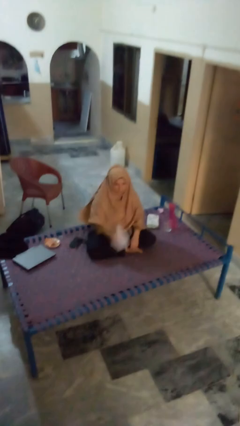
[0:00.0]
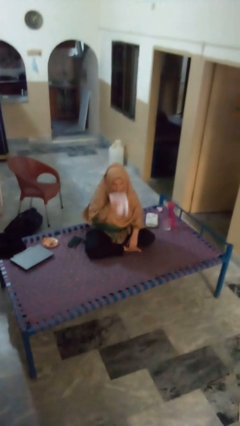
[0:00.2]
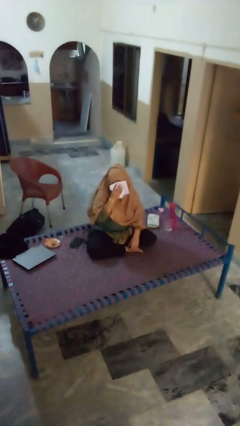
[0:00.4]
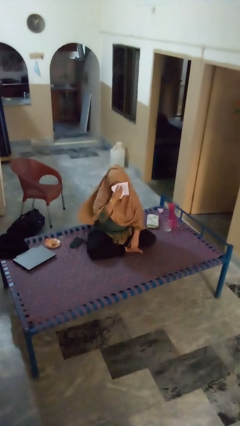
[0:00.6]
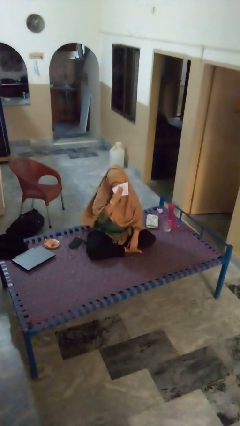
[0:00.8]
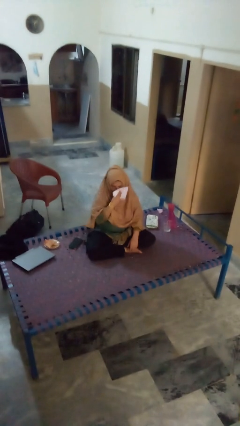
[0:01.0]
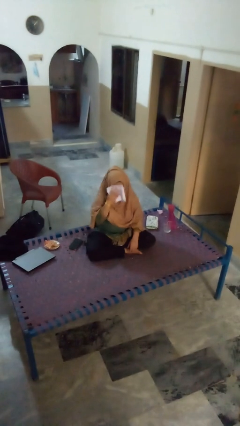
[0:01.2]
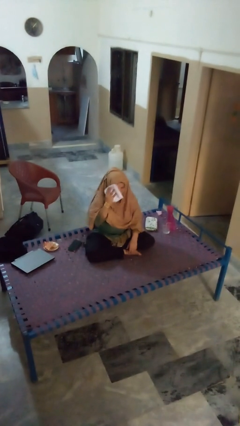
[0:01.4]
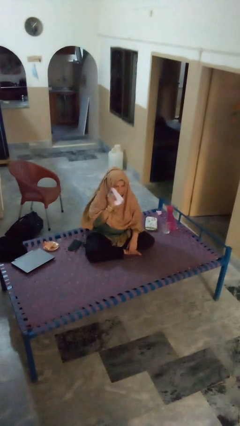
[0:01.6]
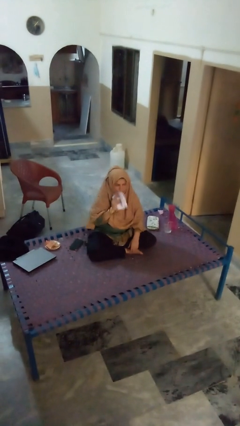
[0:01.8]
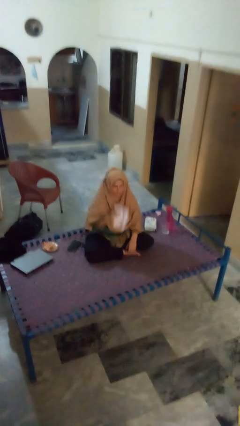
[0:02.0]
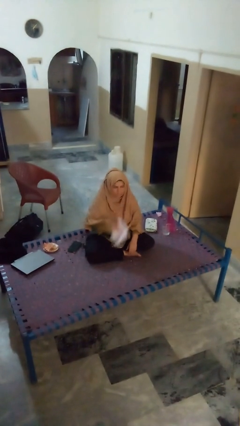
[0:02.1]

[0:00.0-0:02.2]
person wipes mouth with napkin

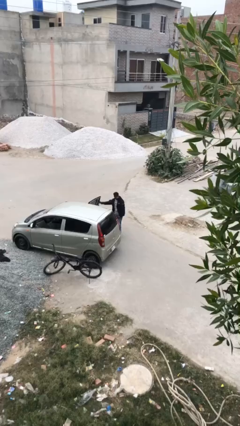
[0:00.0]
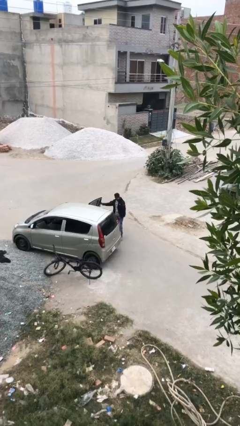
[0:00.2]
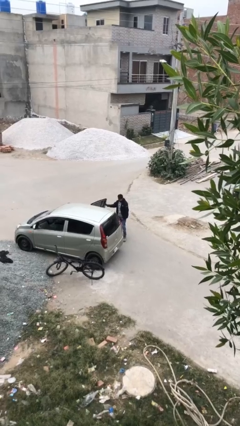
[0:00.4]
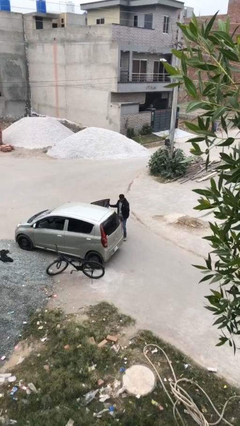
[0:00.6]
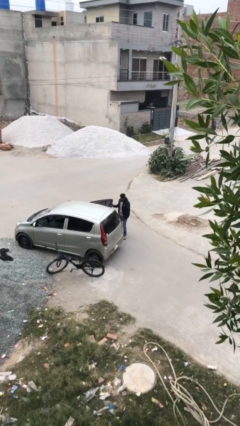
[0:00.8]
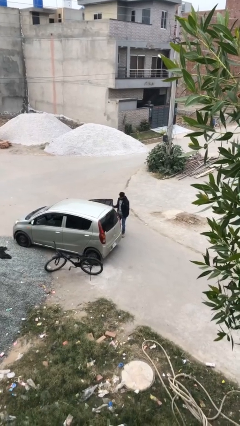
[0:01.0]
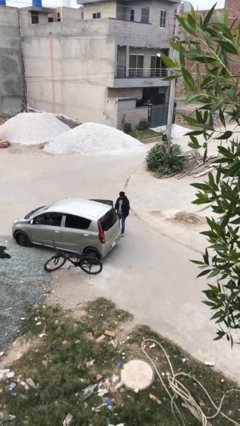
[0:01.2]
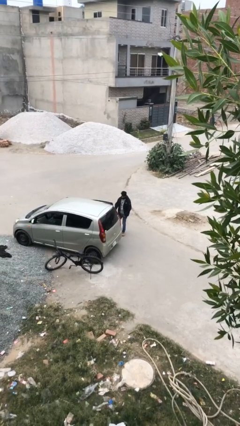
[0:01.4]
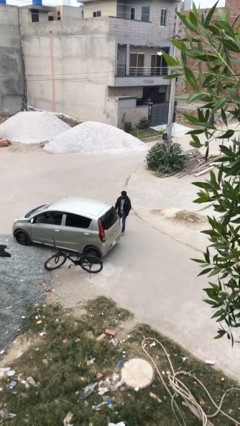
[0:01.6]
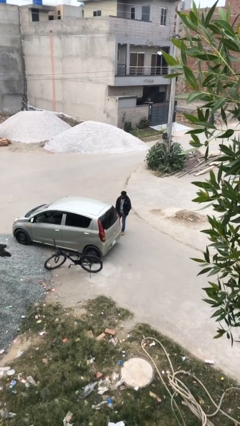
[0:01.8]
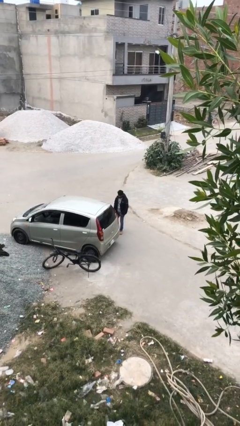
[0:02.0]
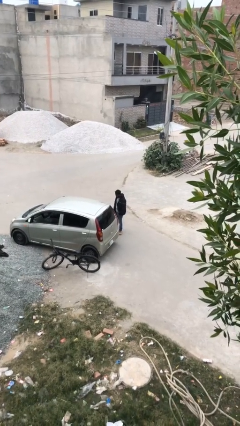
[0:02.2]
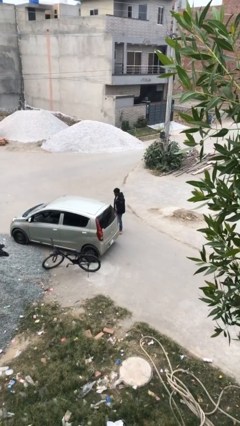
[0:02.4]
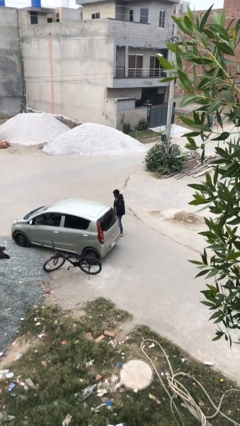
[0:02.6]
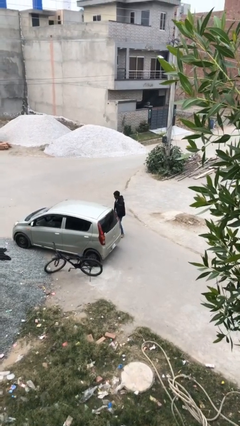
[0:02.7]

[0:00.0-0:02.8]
person closes car door

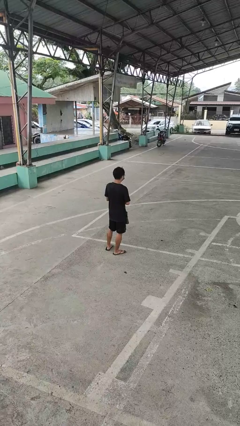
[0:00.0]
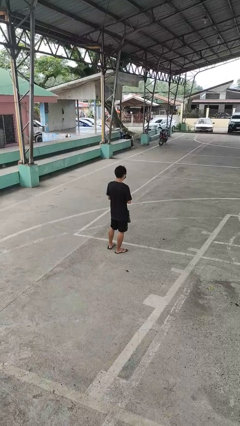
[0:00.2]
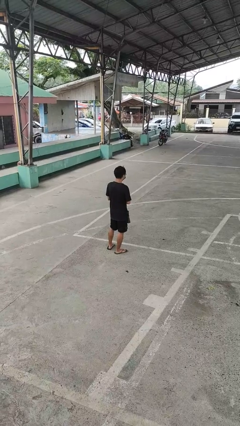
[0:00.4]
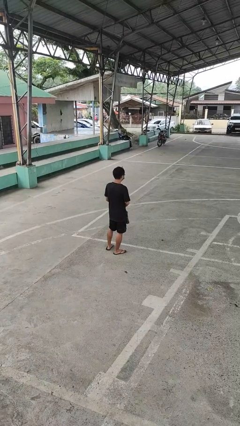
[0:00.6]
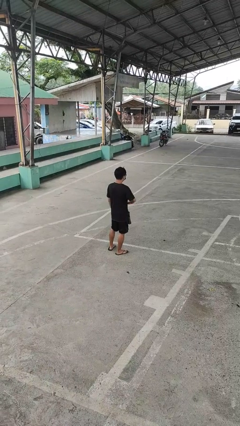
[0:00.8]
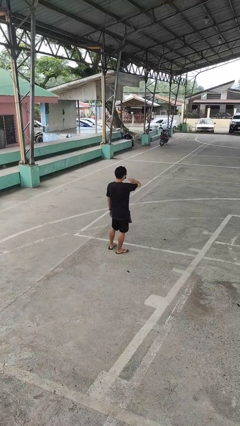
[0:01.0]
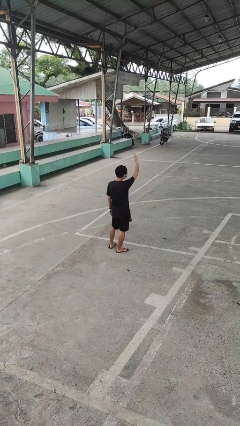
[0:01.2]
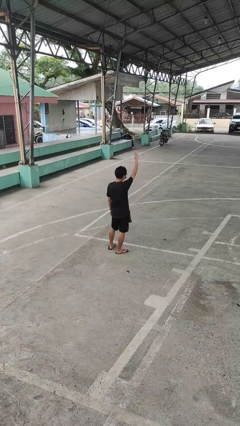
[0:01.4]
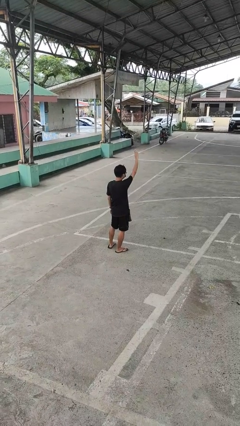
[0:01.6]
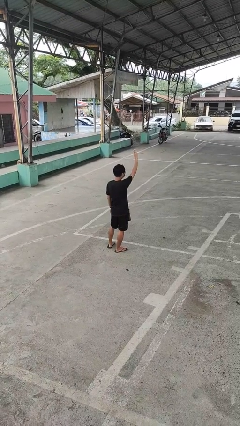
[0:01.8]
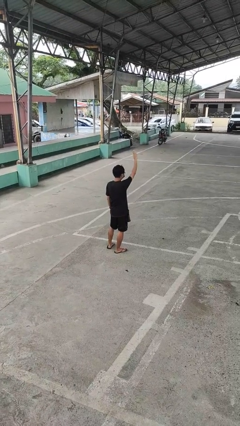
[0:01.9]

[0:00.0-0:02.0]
person gestures swipe up

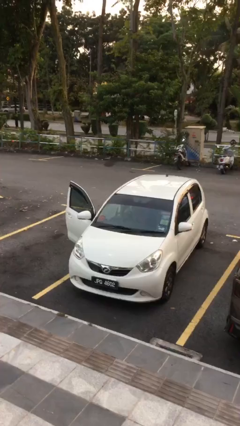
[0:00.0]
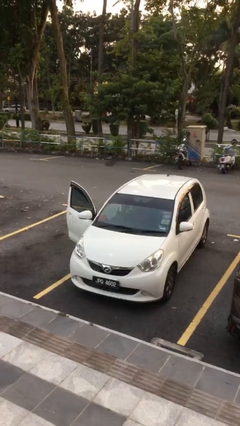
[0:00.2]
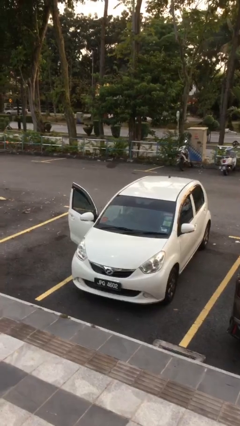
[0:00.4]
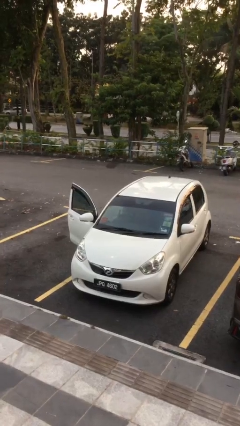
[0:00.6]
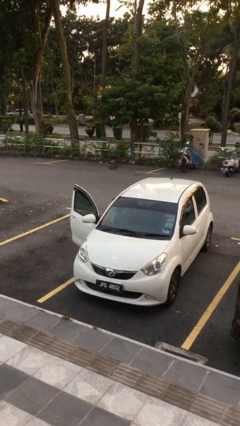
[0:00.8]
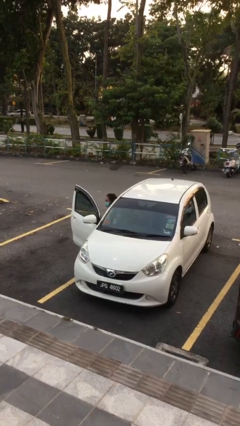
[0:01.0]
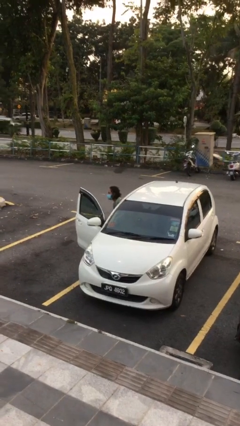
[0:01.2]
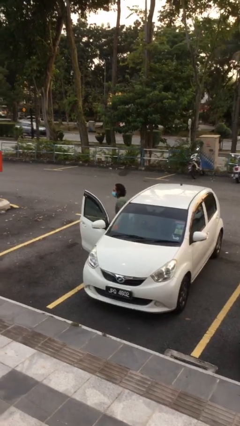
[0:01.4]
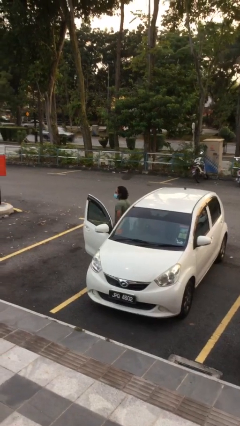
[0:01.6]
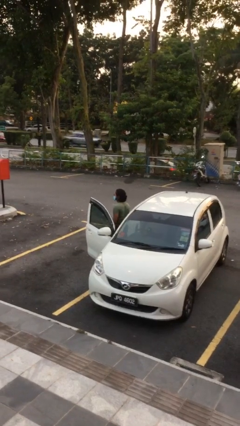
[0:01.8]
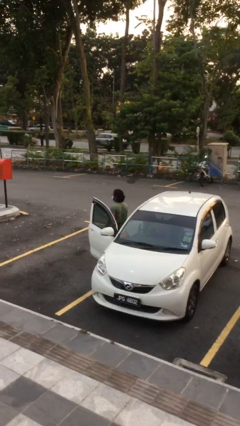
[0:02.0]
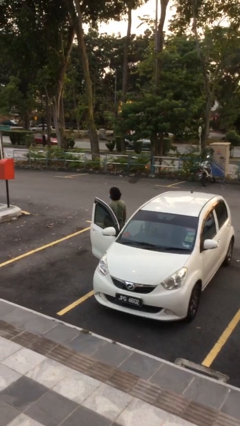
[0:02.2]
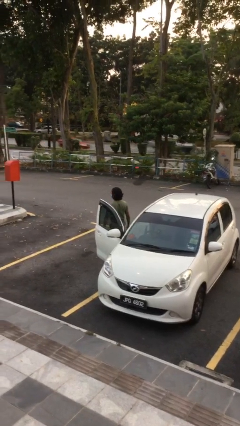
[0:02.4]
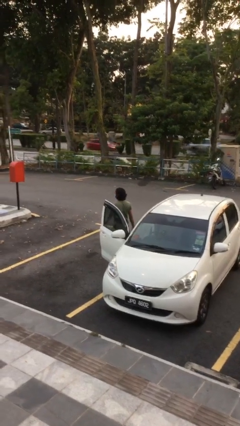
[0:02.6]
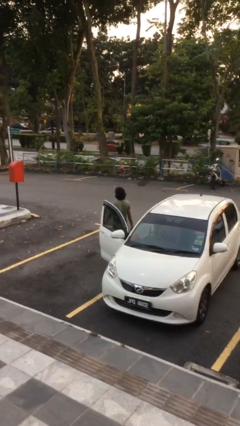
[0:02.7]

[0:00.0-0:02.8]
person exits car

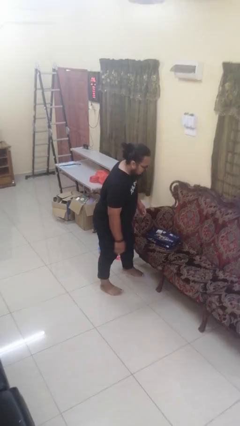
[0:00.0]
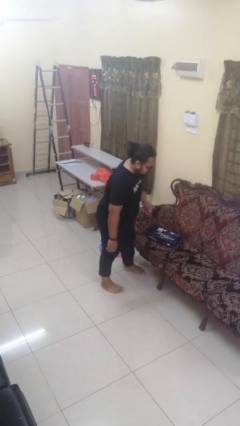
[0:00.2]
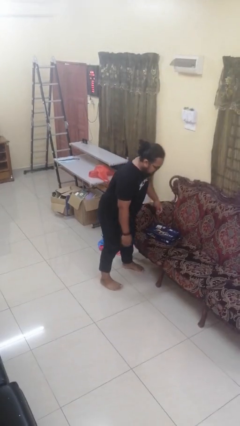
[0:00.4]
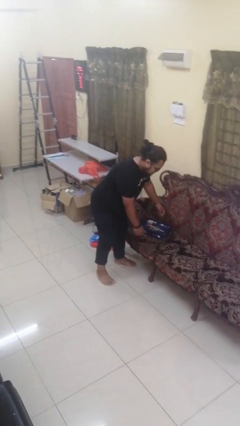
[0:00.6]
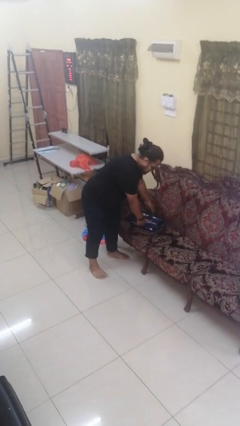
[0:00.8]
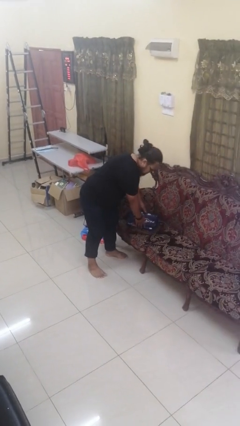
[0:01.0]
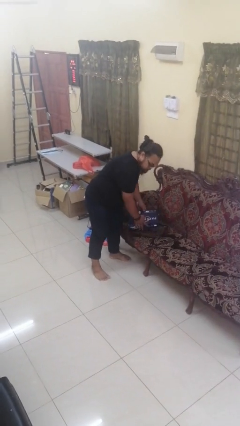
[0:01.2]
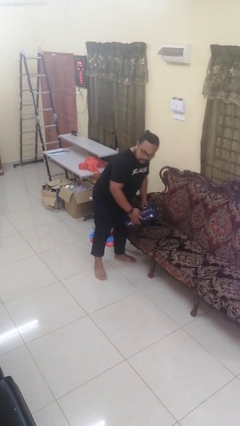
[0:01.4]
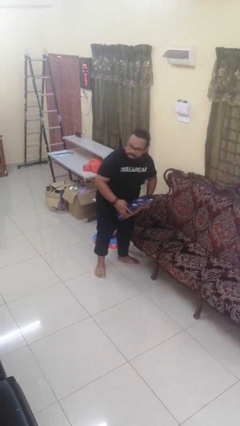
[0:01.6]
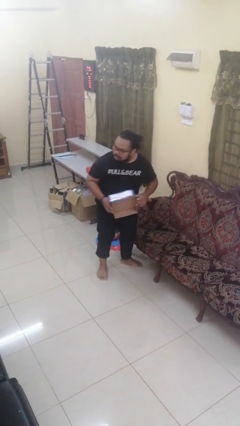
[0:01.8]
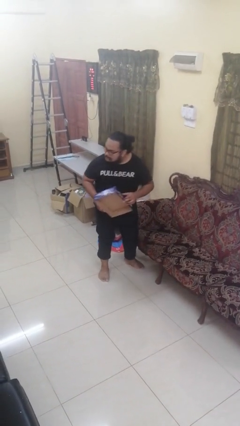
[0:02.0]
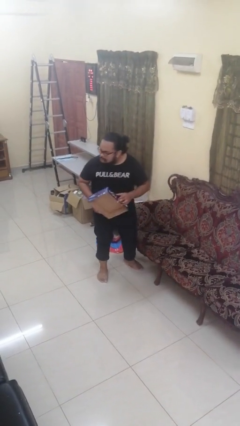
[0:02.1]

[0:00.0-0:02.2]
person picks up object from couch

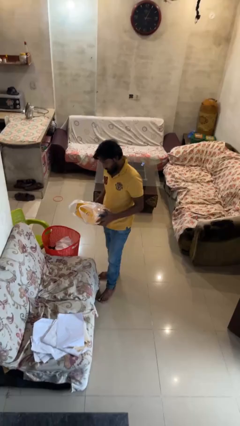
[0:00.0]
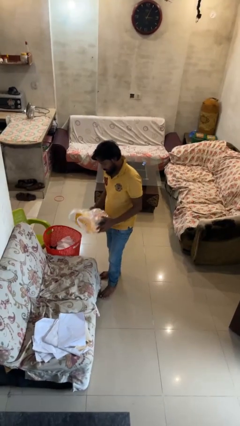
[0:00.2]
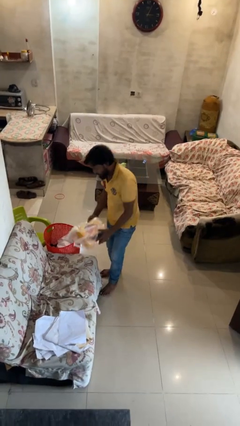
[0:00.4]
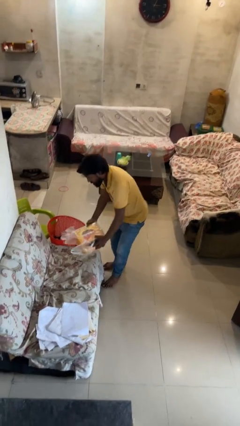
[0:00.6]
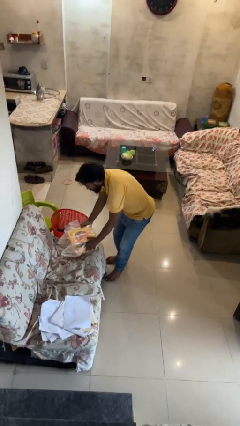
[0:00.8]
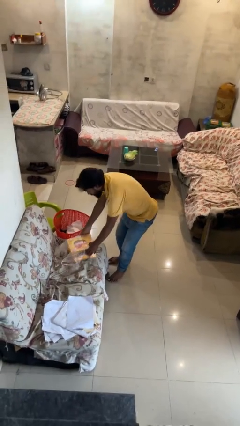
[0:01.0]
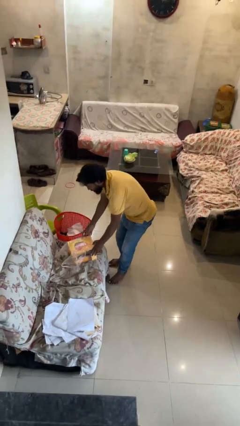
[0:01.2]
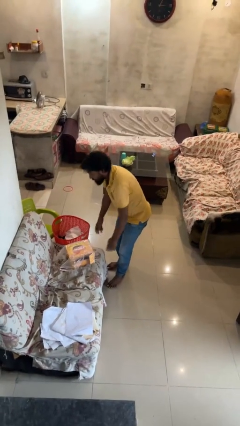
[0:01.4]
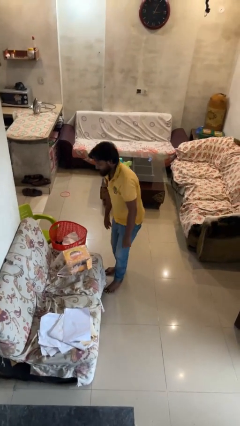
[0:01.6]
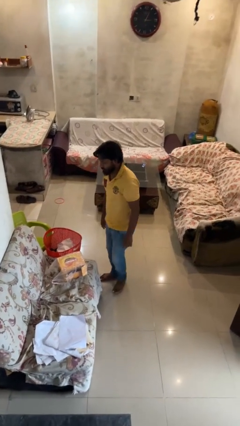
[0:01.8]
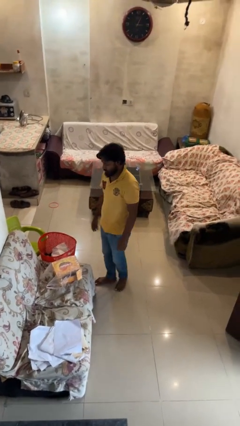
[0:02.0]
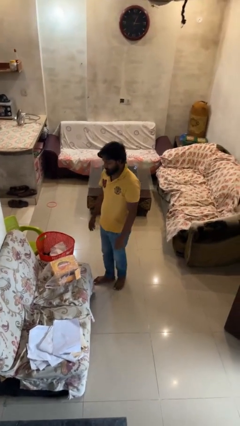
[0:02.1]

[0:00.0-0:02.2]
person puts down object on couch

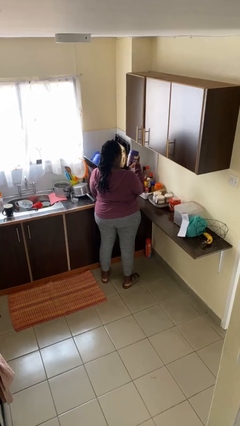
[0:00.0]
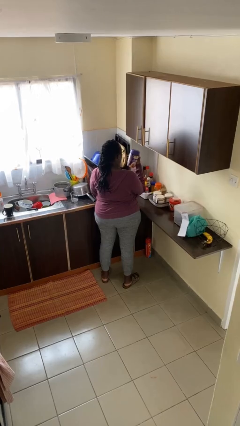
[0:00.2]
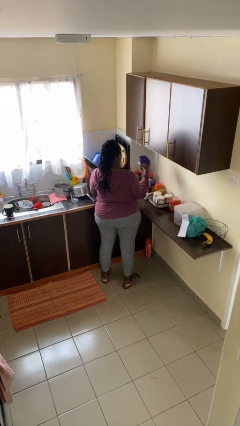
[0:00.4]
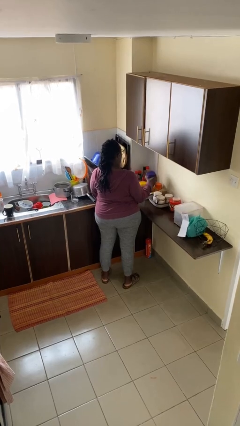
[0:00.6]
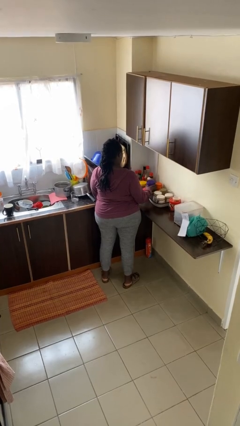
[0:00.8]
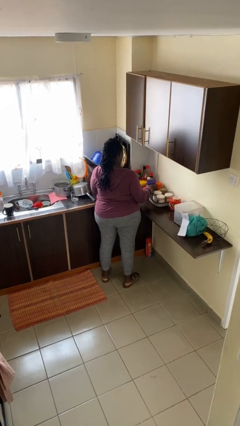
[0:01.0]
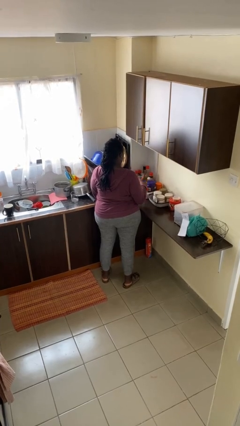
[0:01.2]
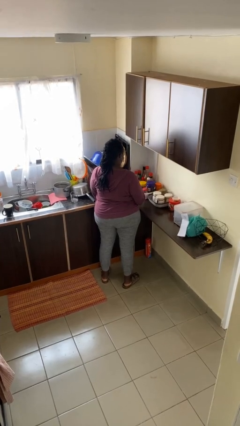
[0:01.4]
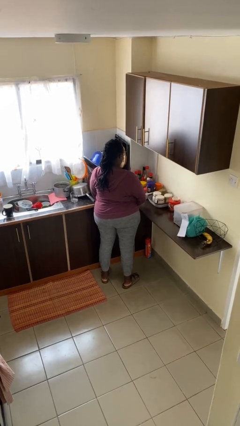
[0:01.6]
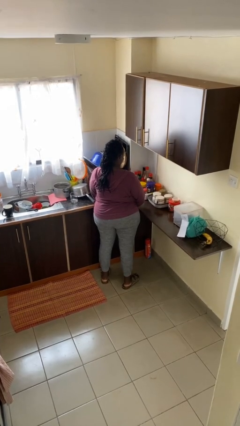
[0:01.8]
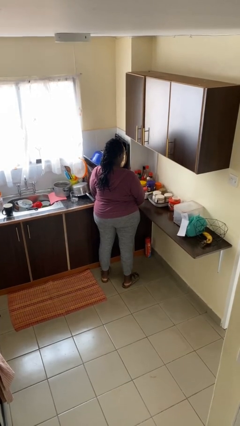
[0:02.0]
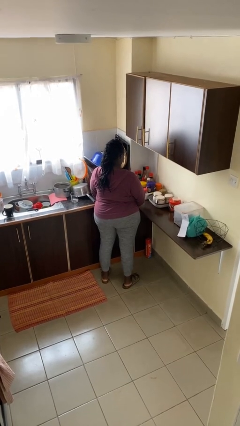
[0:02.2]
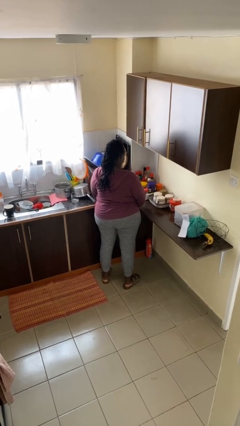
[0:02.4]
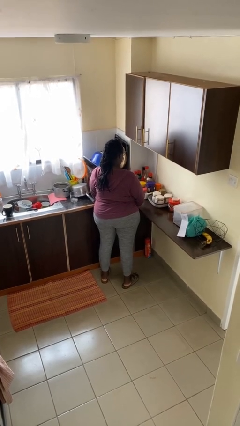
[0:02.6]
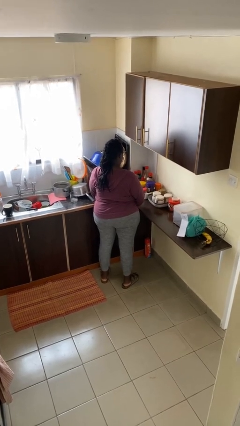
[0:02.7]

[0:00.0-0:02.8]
person puts down object on countertop
